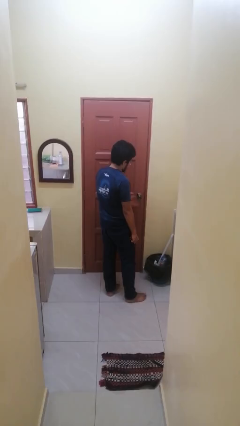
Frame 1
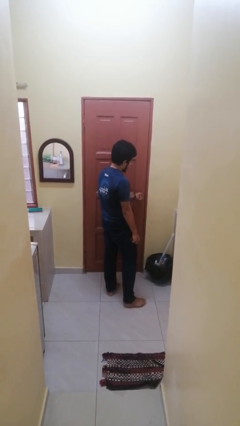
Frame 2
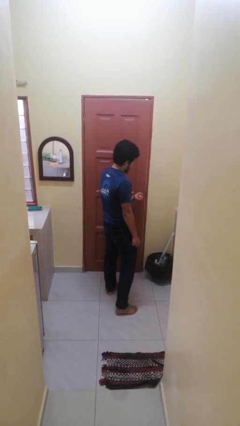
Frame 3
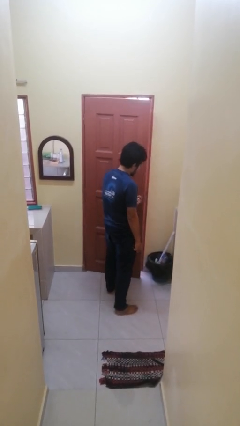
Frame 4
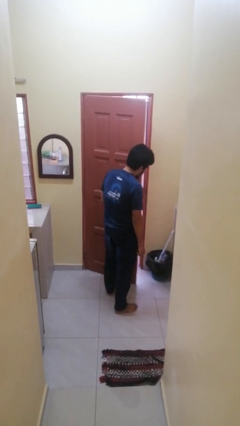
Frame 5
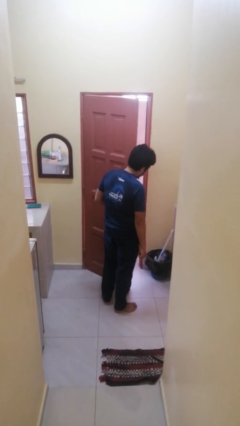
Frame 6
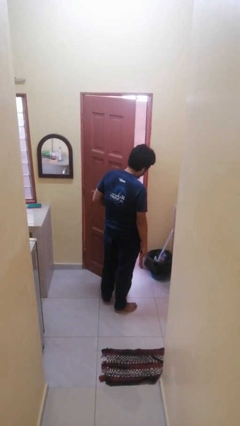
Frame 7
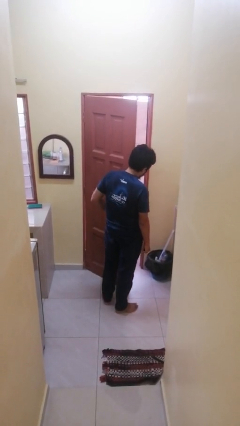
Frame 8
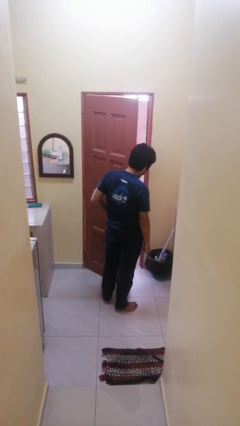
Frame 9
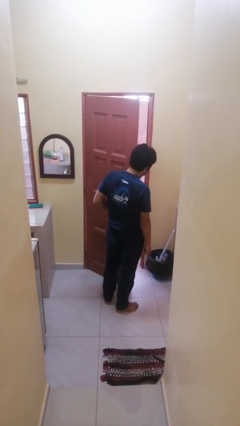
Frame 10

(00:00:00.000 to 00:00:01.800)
person opens facility door

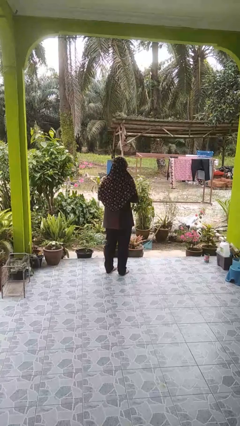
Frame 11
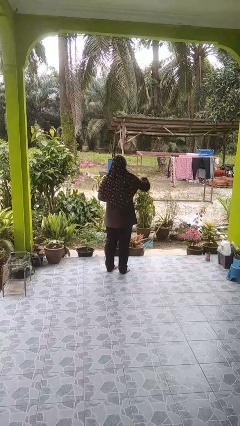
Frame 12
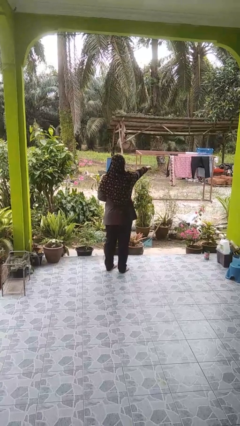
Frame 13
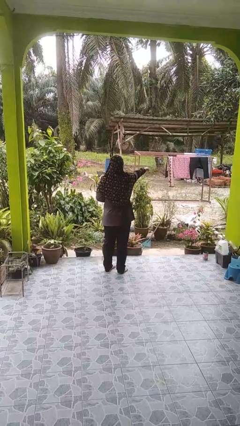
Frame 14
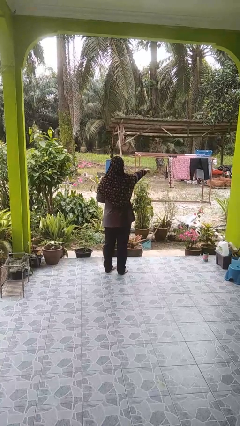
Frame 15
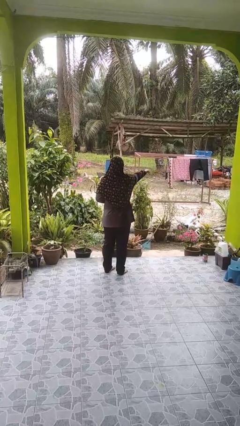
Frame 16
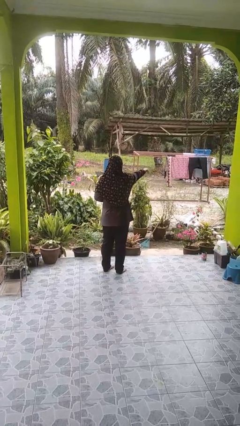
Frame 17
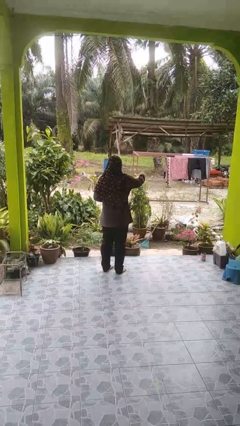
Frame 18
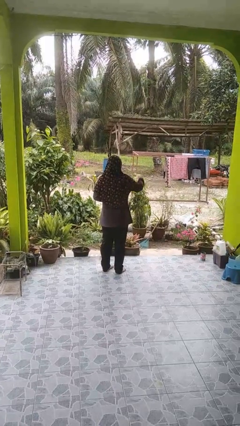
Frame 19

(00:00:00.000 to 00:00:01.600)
person punches

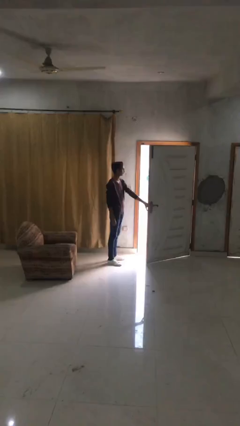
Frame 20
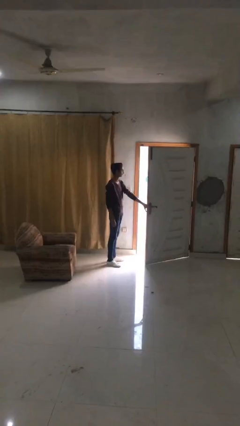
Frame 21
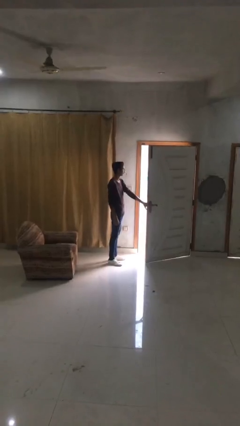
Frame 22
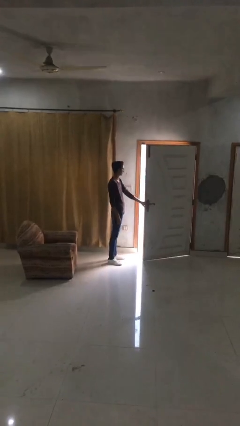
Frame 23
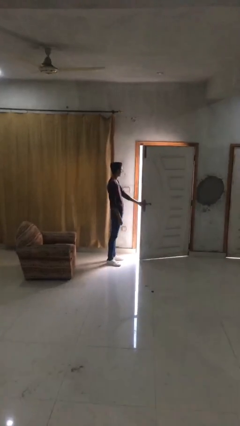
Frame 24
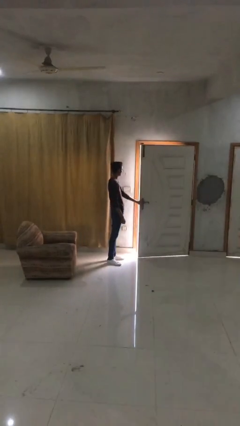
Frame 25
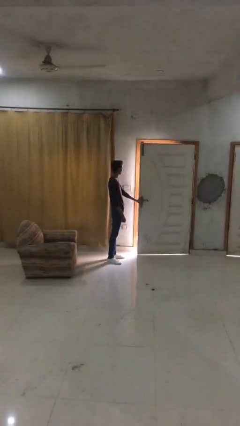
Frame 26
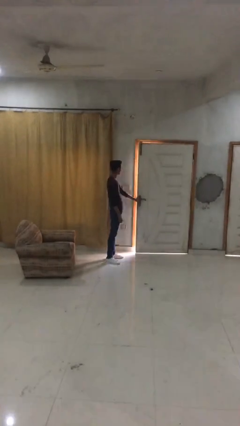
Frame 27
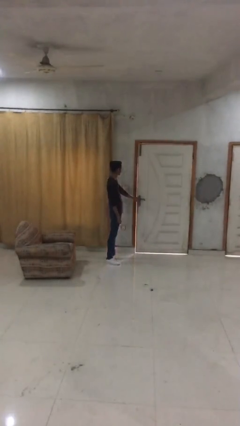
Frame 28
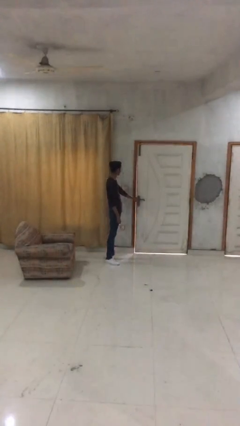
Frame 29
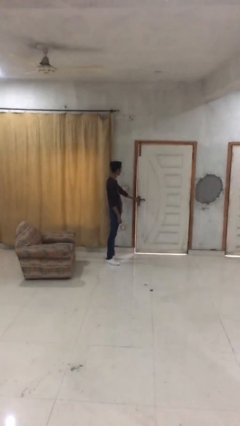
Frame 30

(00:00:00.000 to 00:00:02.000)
person closes facility door

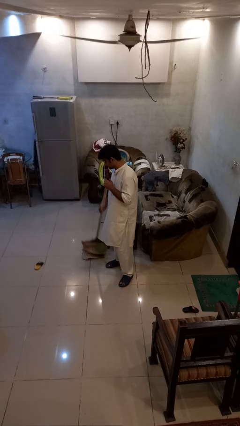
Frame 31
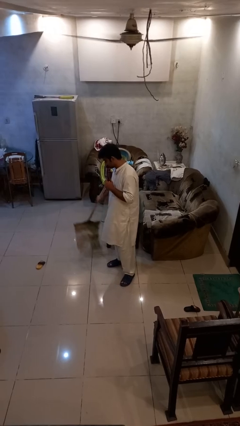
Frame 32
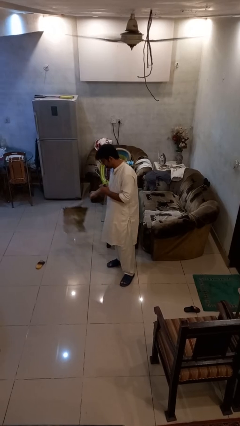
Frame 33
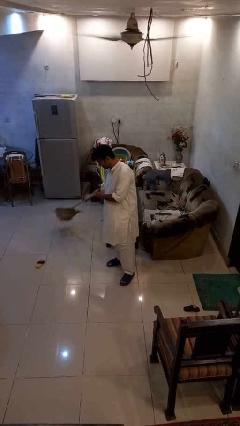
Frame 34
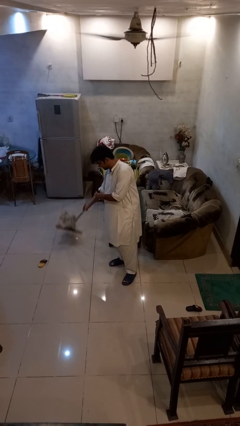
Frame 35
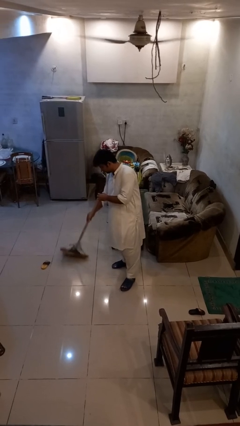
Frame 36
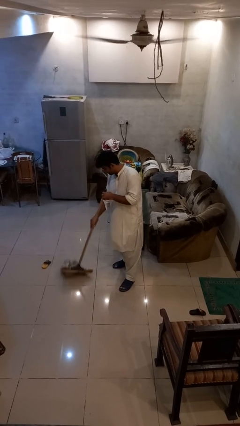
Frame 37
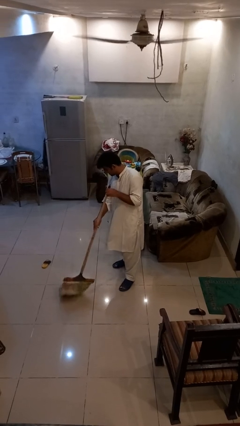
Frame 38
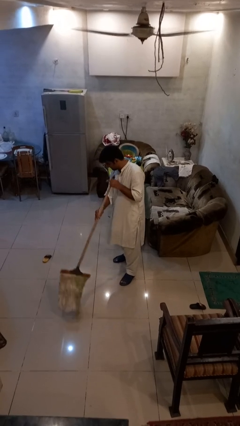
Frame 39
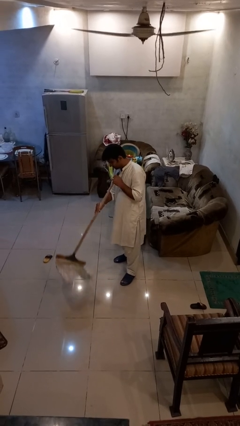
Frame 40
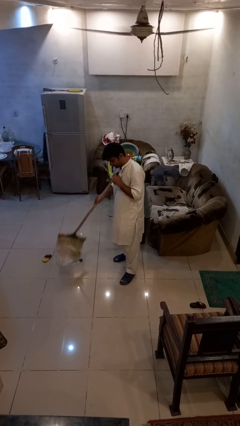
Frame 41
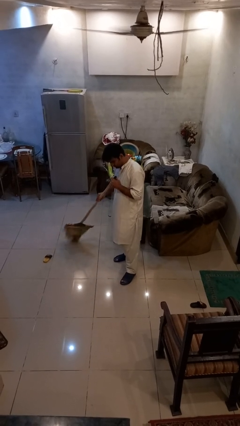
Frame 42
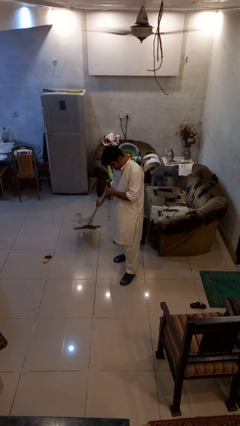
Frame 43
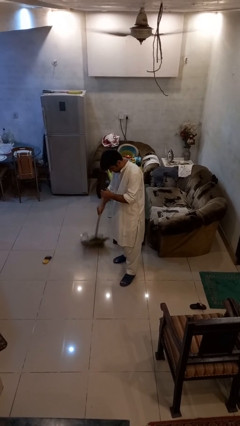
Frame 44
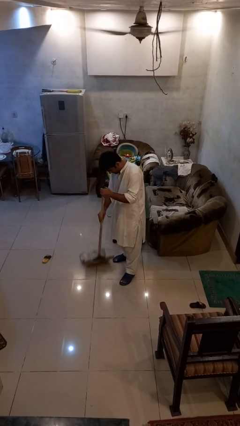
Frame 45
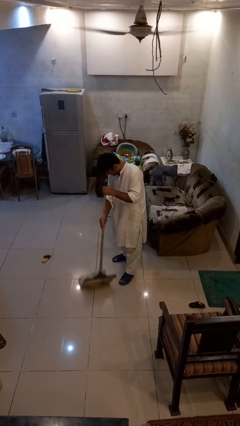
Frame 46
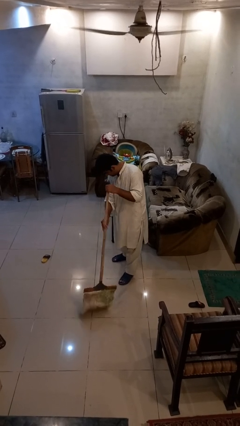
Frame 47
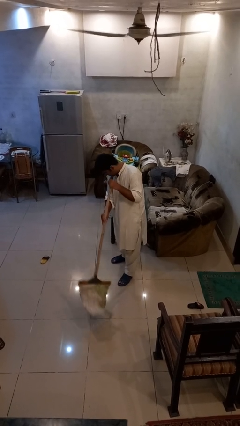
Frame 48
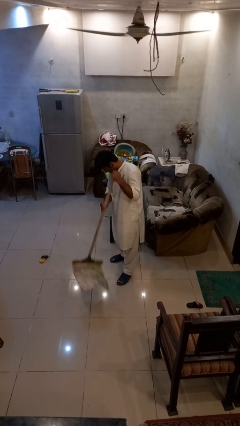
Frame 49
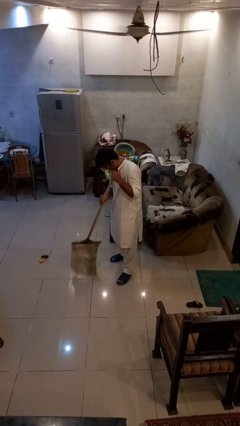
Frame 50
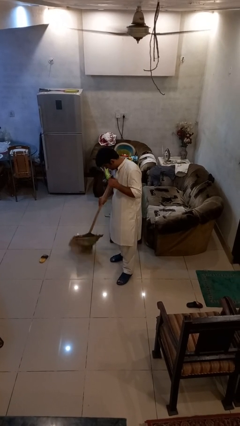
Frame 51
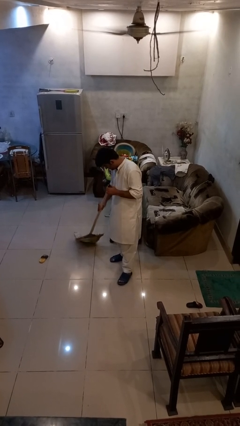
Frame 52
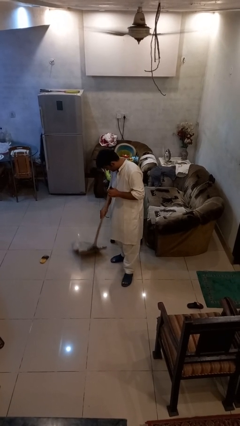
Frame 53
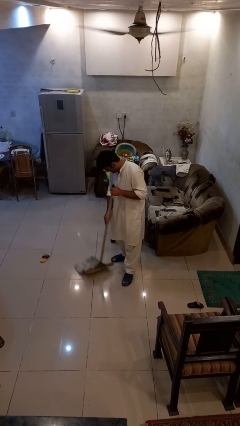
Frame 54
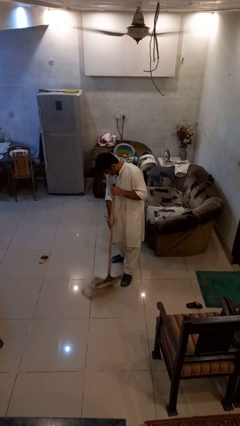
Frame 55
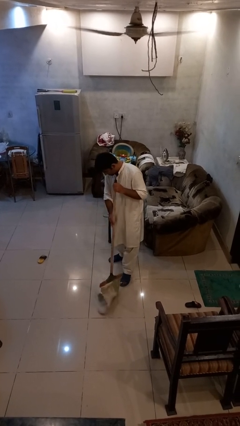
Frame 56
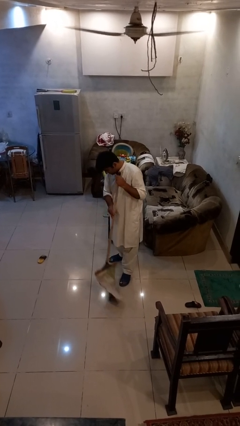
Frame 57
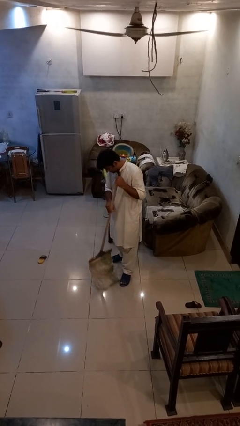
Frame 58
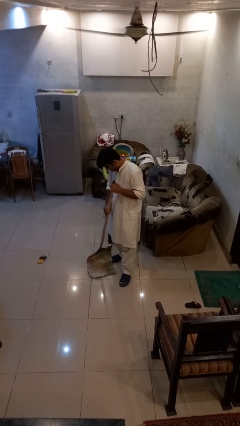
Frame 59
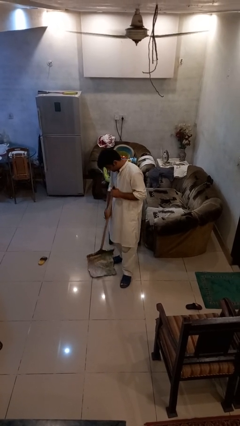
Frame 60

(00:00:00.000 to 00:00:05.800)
person mops

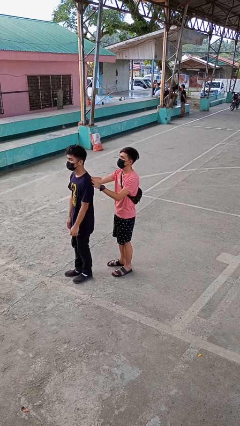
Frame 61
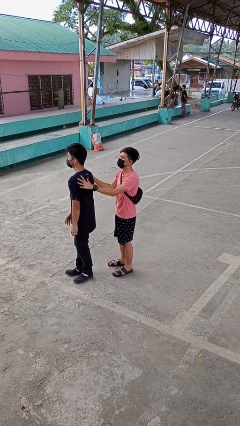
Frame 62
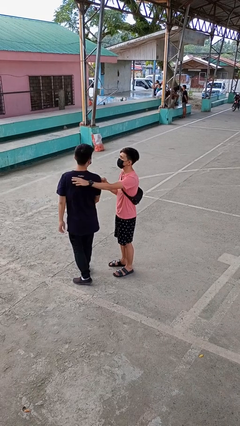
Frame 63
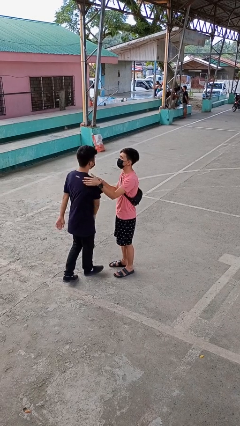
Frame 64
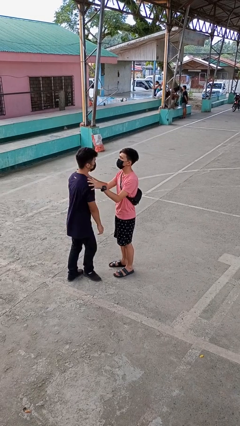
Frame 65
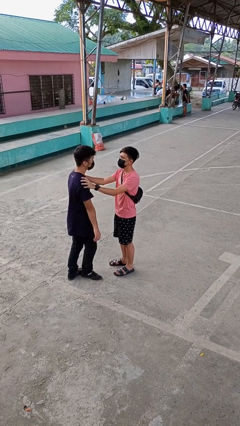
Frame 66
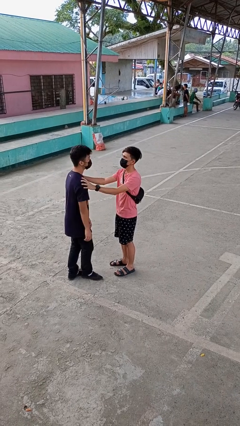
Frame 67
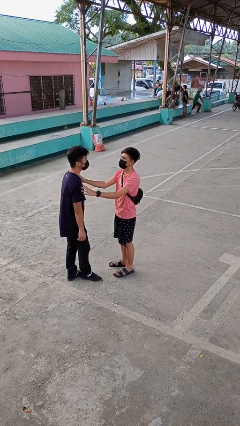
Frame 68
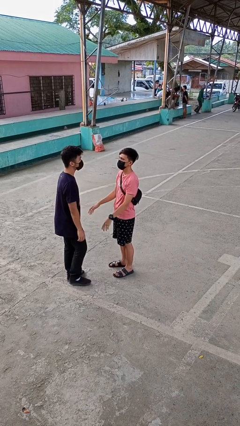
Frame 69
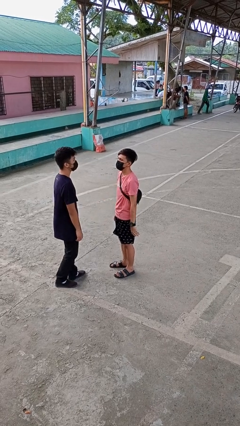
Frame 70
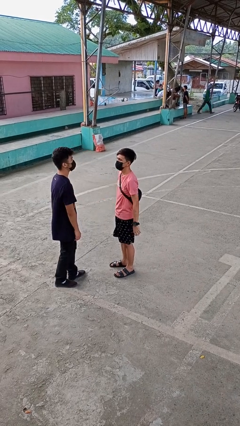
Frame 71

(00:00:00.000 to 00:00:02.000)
person spins person around

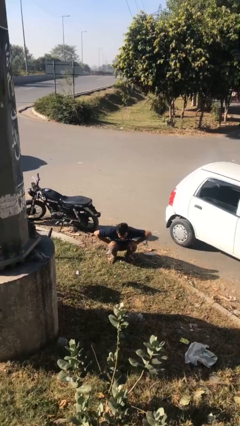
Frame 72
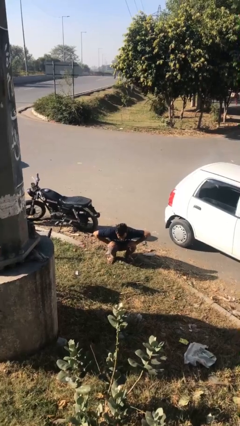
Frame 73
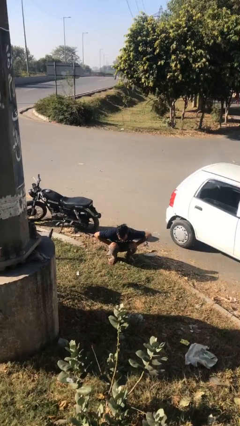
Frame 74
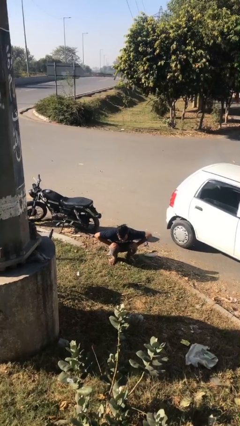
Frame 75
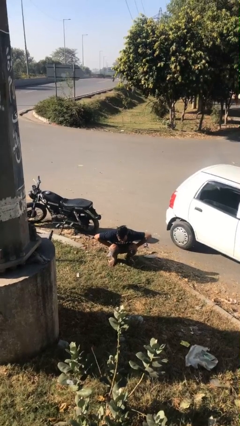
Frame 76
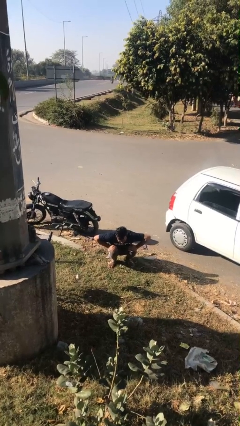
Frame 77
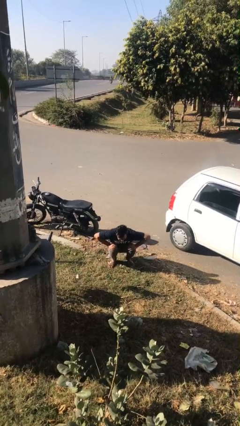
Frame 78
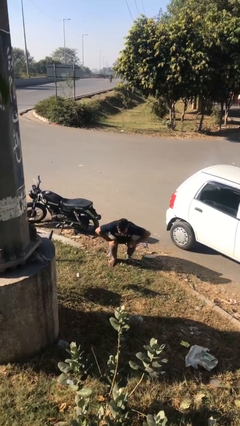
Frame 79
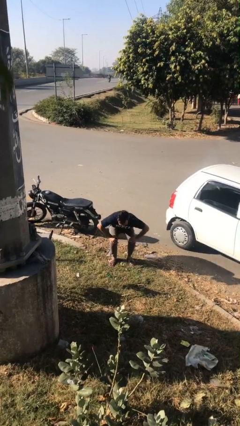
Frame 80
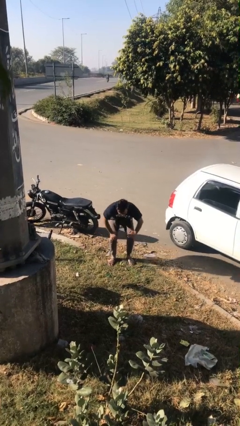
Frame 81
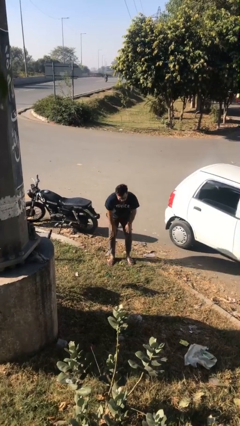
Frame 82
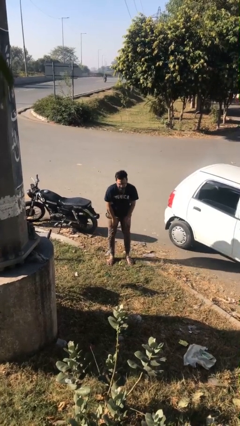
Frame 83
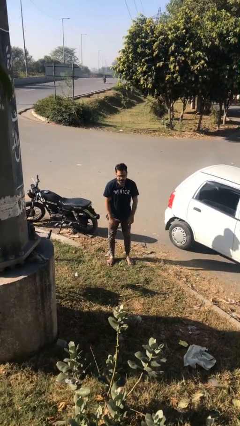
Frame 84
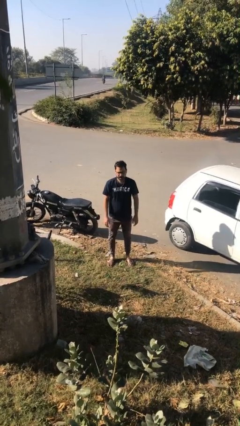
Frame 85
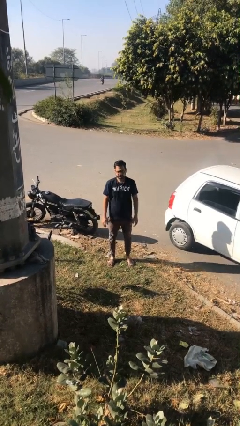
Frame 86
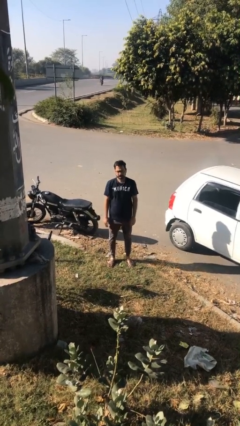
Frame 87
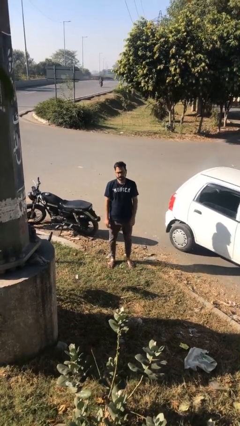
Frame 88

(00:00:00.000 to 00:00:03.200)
person stands up

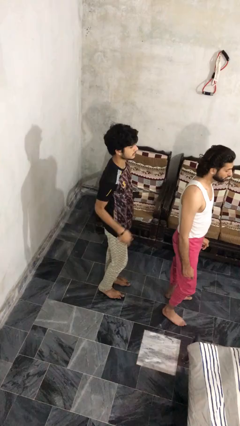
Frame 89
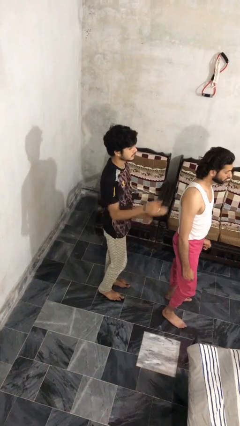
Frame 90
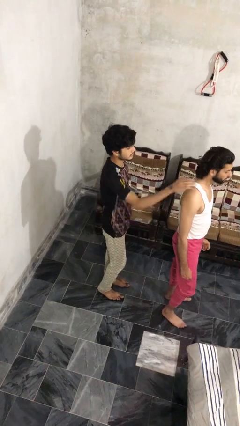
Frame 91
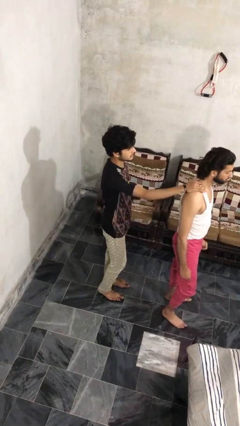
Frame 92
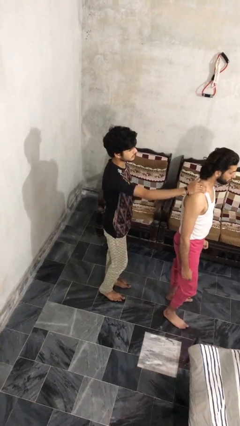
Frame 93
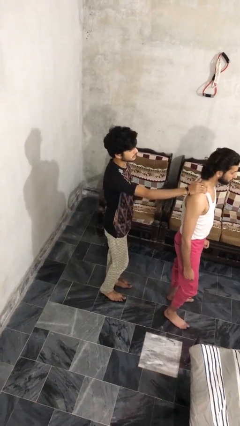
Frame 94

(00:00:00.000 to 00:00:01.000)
person grabs person by shoulder
